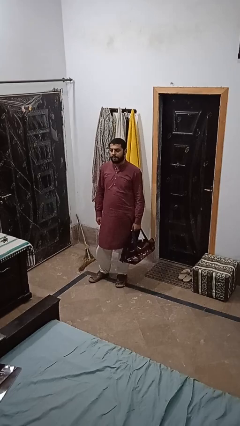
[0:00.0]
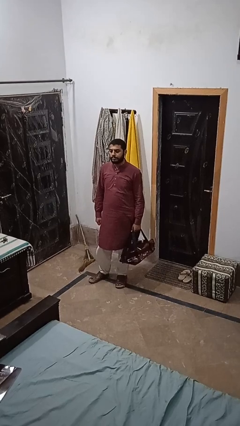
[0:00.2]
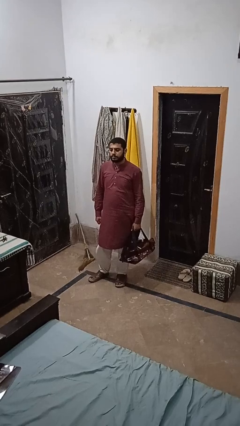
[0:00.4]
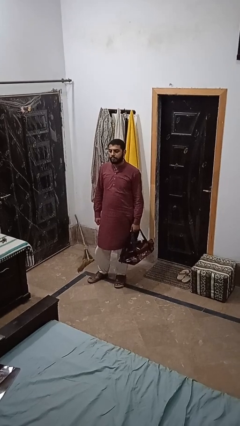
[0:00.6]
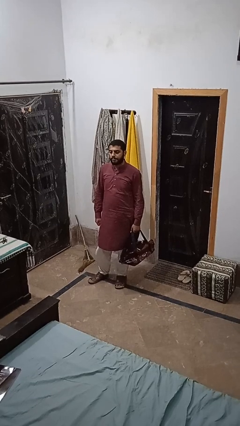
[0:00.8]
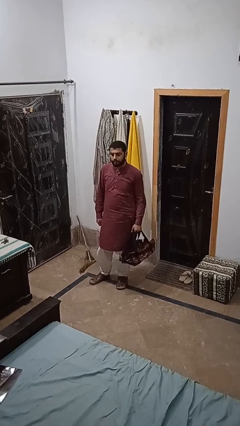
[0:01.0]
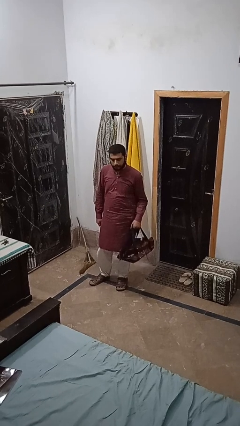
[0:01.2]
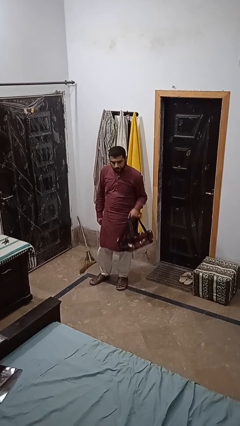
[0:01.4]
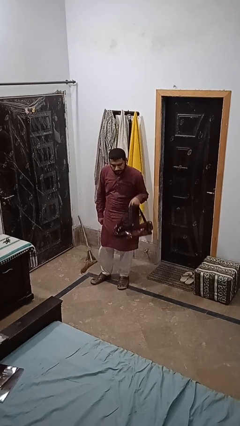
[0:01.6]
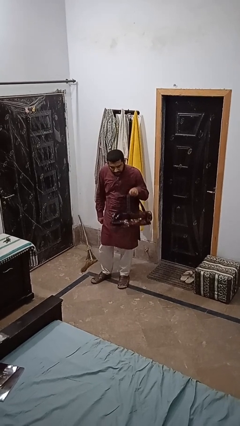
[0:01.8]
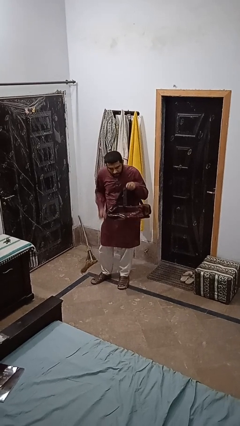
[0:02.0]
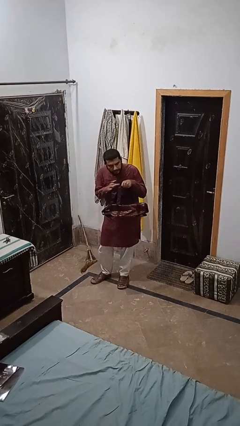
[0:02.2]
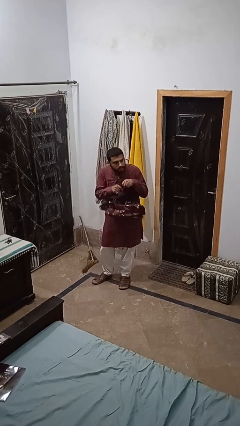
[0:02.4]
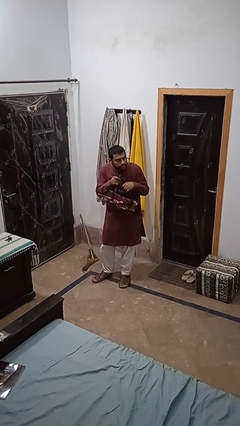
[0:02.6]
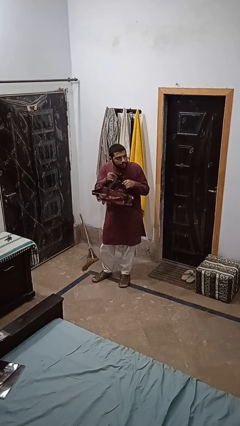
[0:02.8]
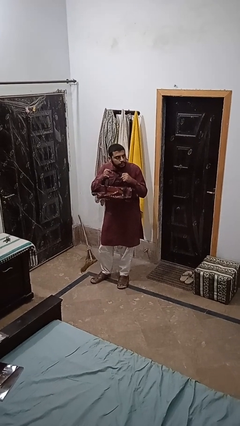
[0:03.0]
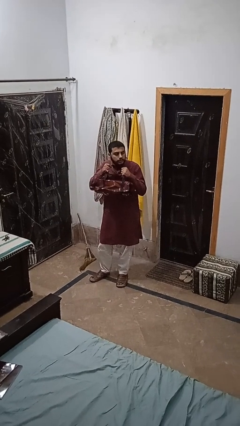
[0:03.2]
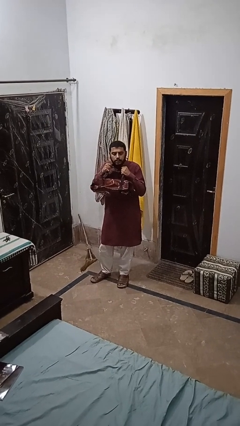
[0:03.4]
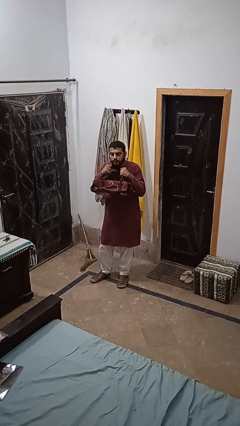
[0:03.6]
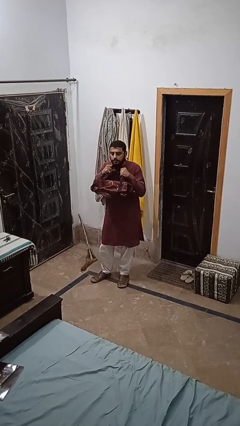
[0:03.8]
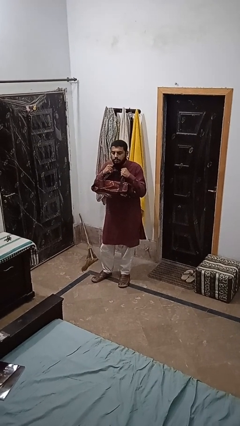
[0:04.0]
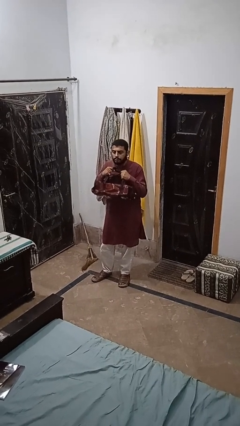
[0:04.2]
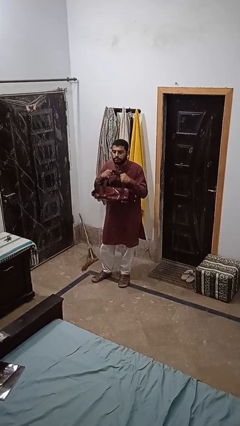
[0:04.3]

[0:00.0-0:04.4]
person puts on backpack

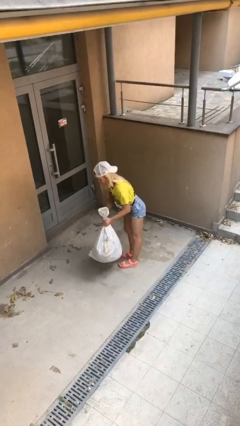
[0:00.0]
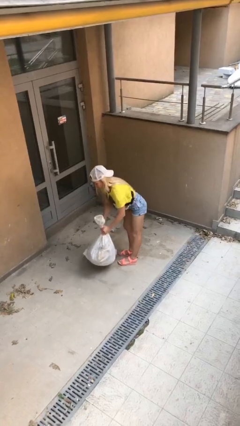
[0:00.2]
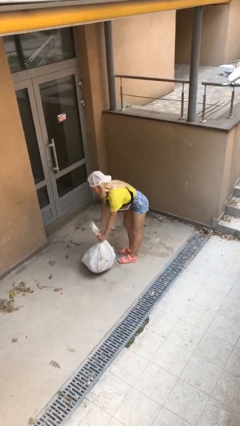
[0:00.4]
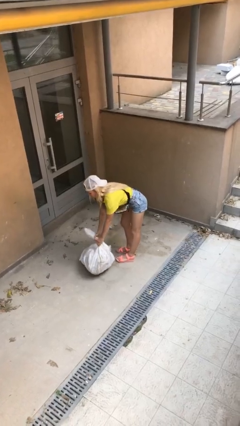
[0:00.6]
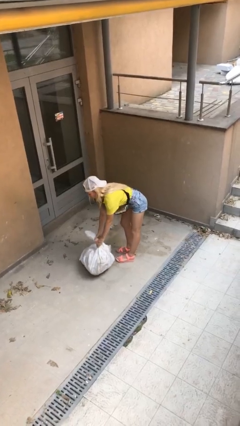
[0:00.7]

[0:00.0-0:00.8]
person puts down object on floor

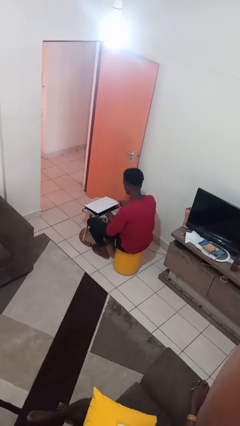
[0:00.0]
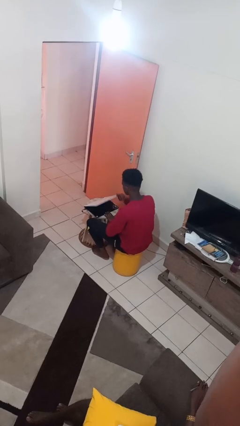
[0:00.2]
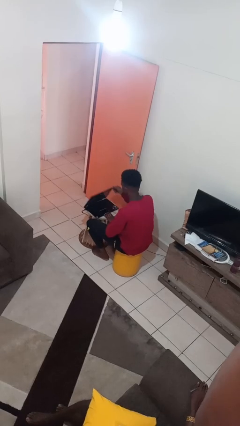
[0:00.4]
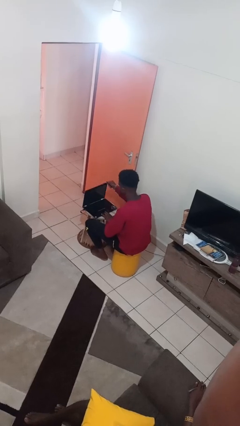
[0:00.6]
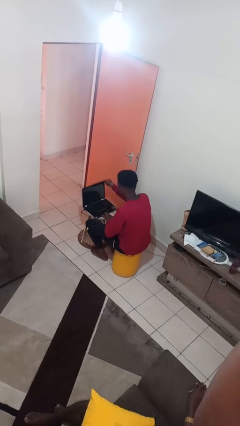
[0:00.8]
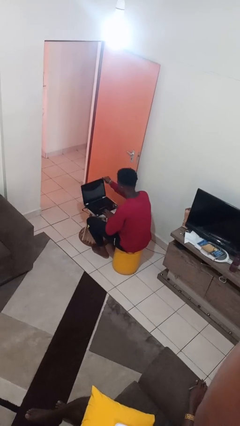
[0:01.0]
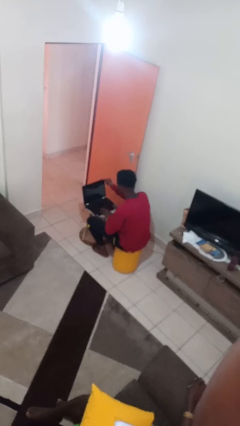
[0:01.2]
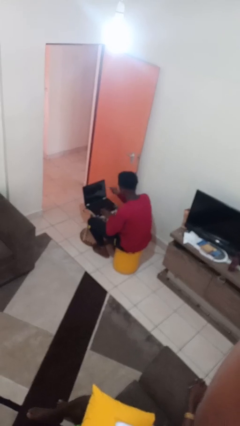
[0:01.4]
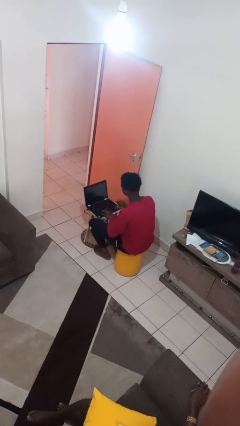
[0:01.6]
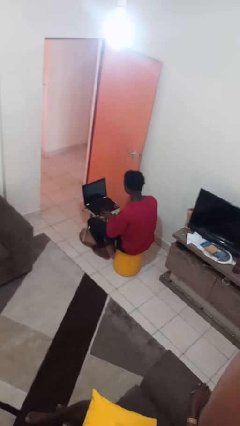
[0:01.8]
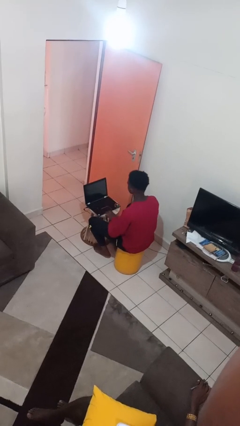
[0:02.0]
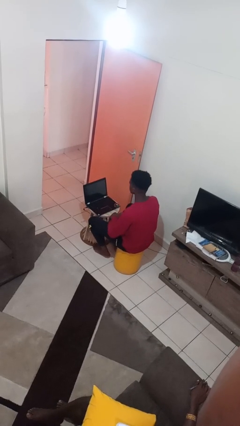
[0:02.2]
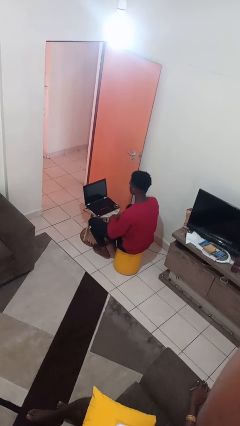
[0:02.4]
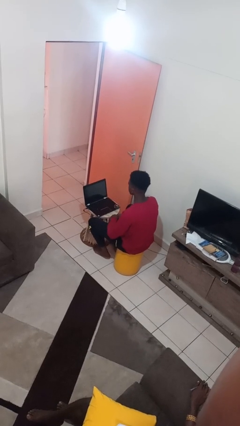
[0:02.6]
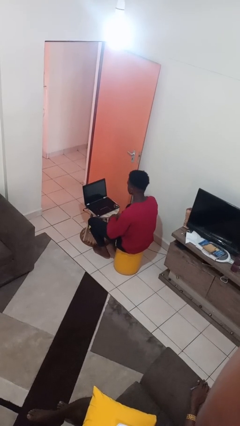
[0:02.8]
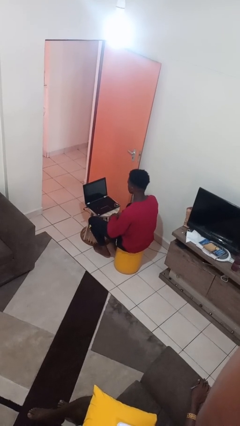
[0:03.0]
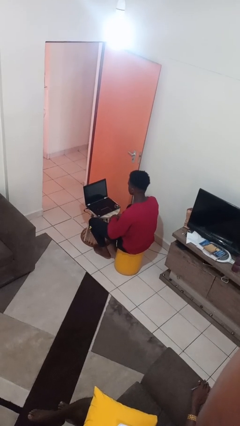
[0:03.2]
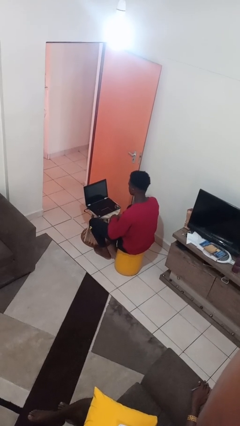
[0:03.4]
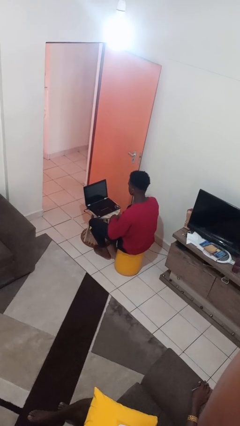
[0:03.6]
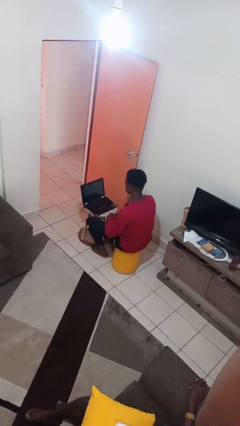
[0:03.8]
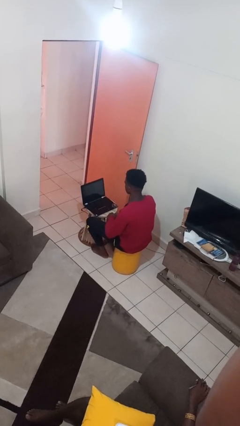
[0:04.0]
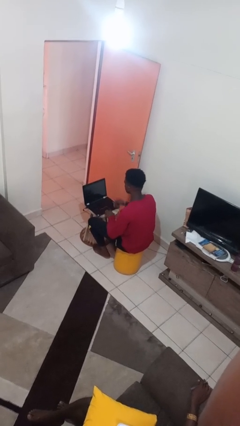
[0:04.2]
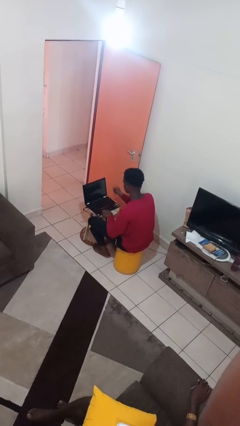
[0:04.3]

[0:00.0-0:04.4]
person opens laptop

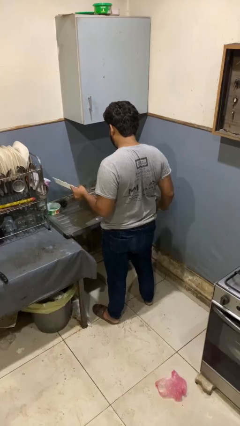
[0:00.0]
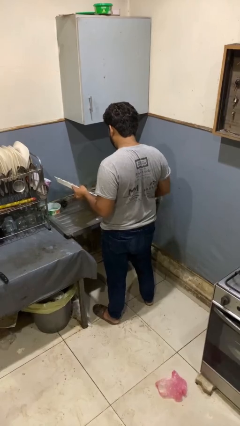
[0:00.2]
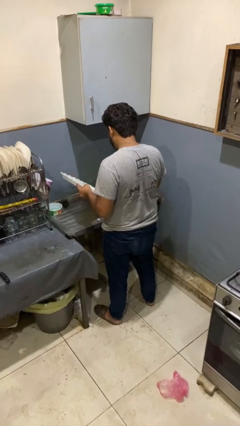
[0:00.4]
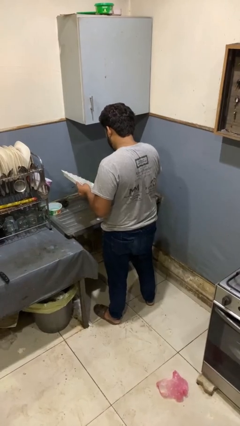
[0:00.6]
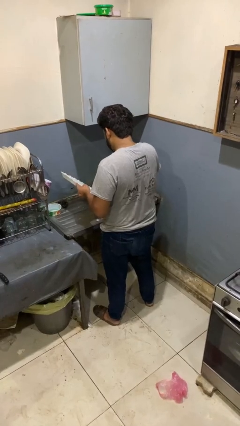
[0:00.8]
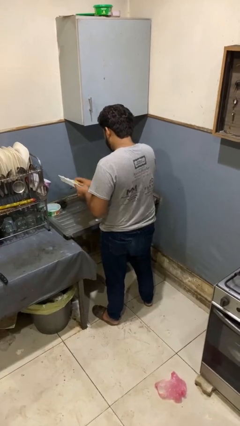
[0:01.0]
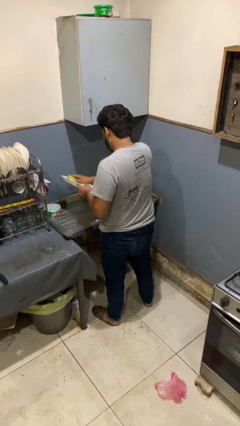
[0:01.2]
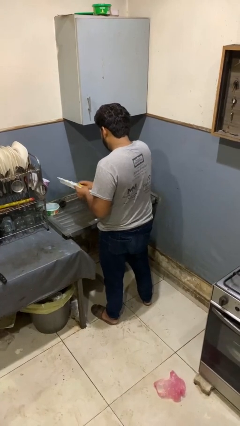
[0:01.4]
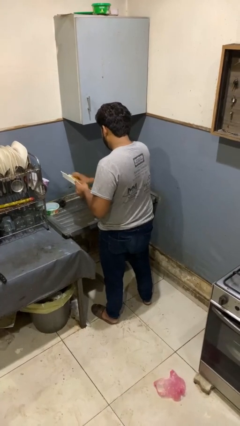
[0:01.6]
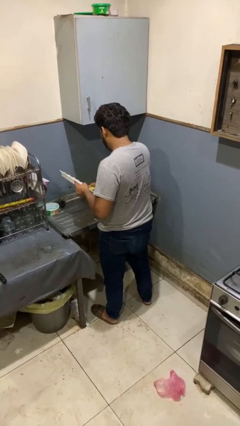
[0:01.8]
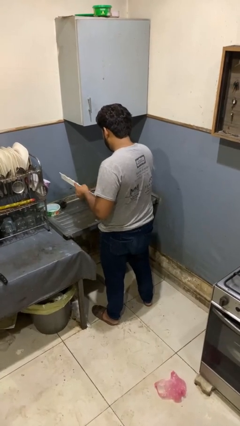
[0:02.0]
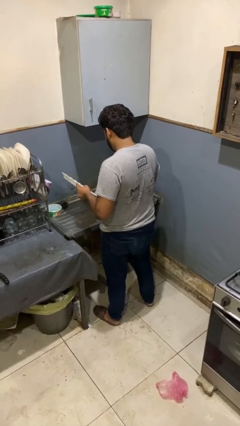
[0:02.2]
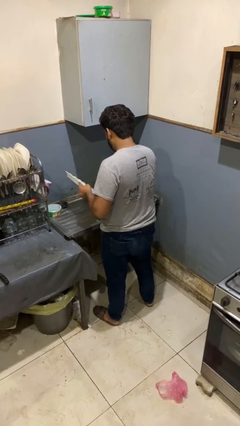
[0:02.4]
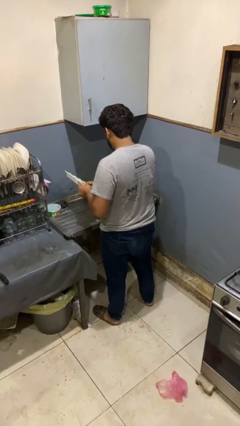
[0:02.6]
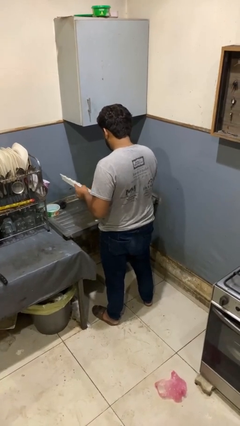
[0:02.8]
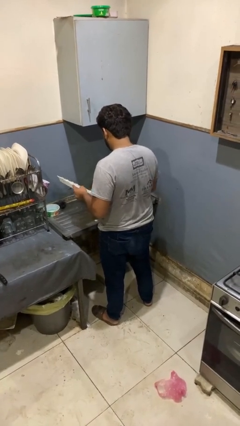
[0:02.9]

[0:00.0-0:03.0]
person washes dish

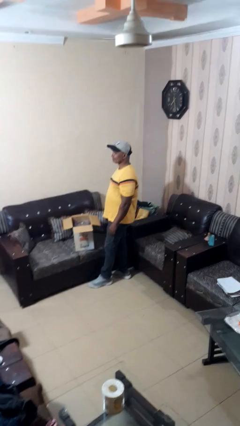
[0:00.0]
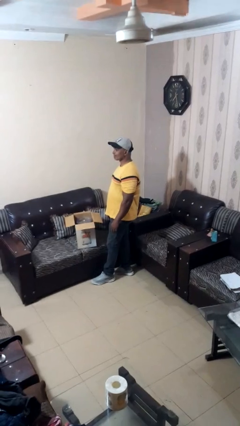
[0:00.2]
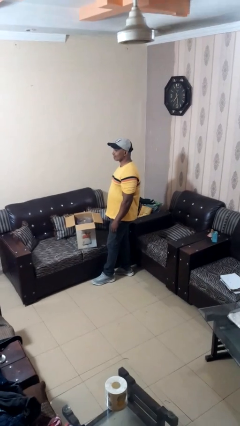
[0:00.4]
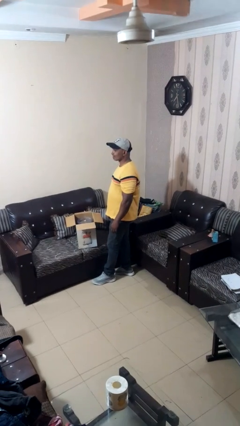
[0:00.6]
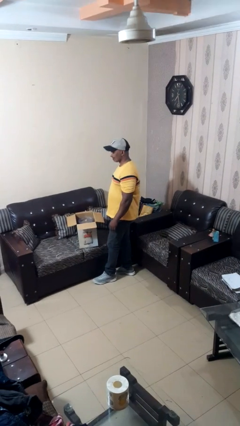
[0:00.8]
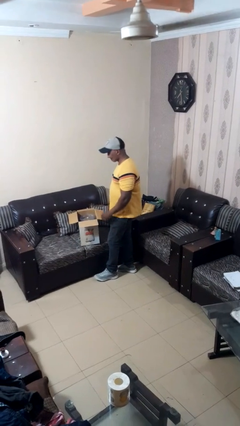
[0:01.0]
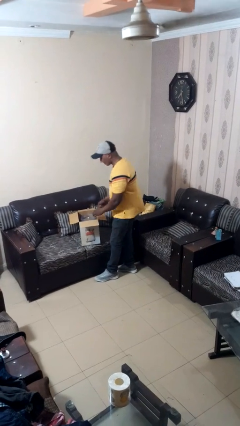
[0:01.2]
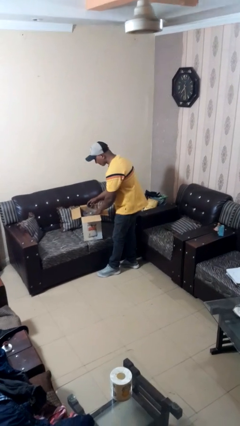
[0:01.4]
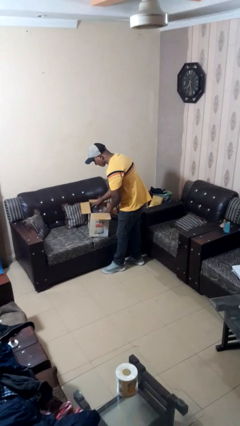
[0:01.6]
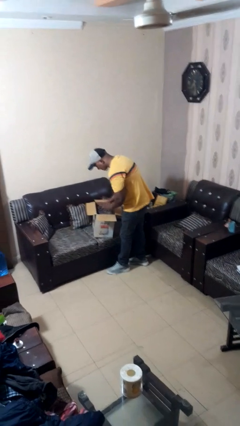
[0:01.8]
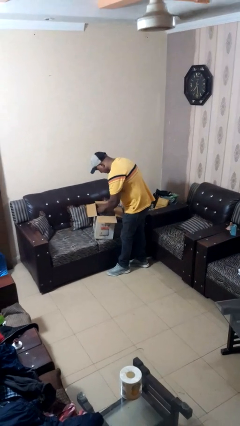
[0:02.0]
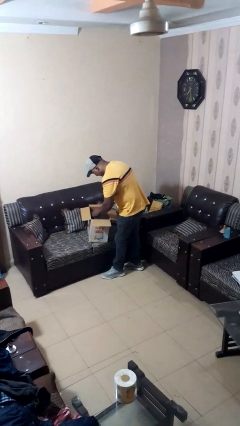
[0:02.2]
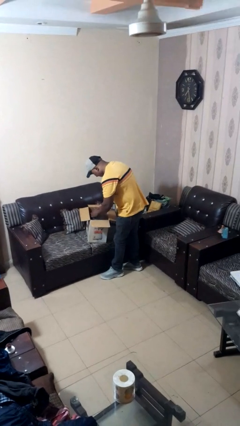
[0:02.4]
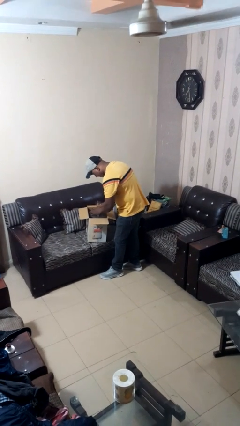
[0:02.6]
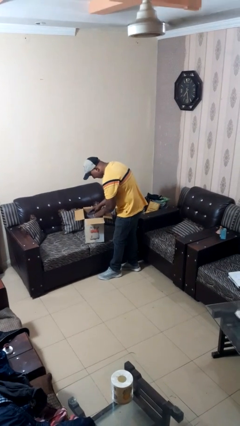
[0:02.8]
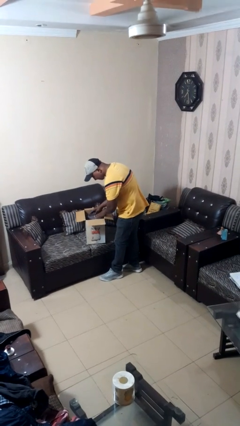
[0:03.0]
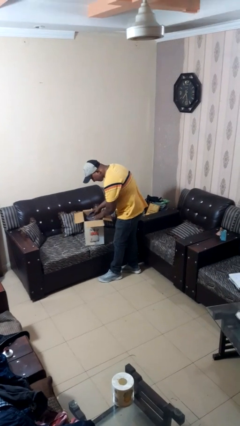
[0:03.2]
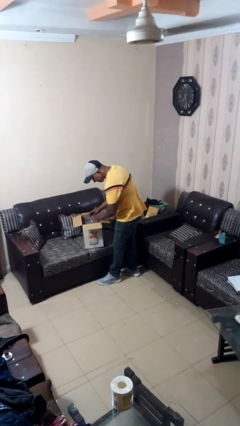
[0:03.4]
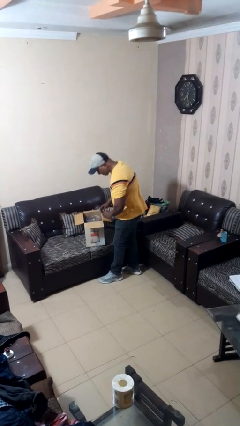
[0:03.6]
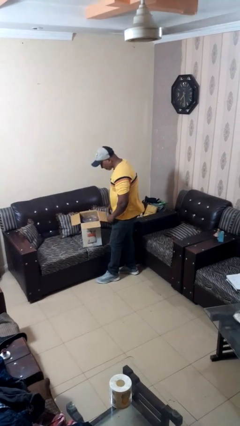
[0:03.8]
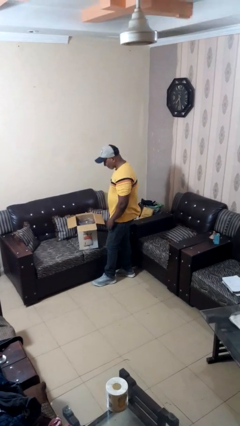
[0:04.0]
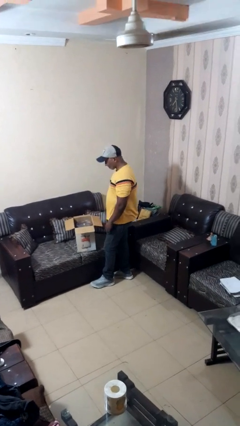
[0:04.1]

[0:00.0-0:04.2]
person searches in box

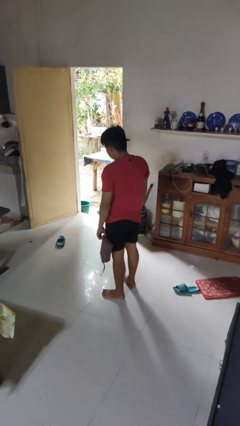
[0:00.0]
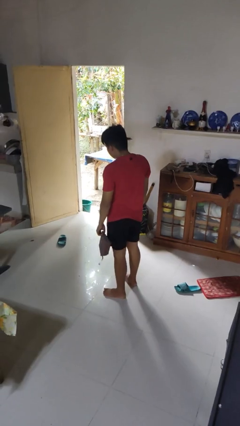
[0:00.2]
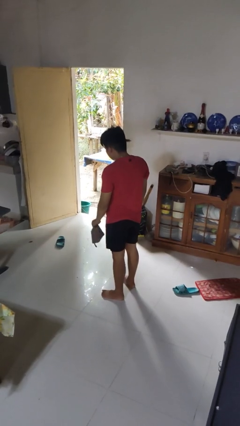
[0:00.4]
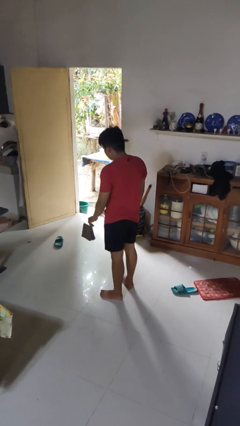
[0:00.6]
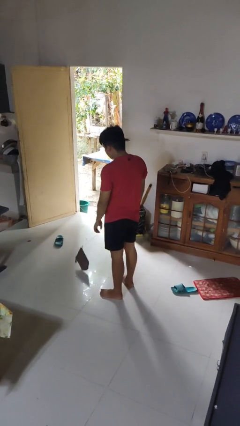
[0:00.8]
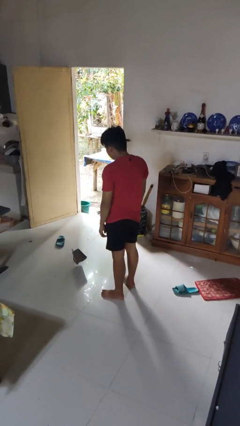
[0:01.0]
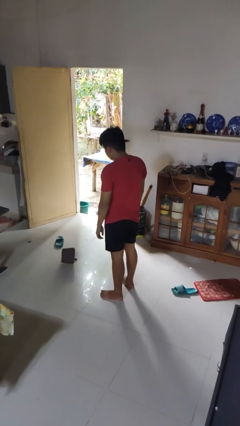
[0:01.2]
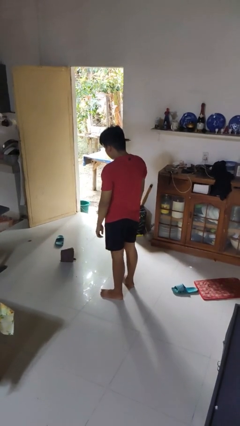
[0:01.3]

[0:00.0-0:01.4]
person throws object to ground
